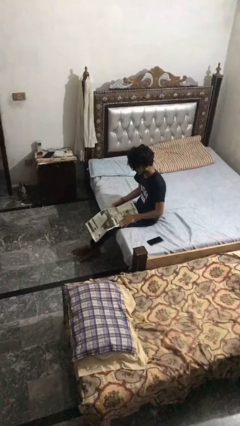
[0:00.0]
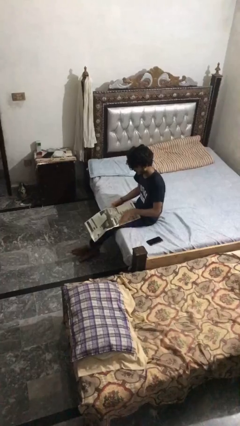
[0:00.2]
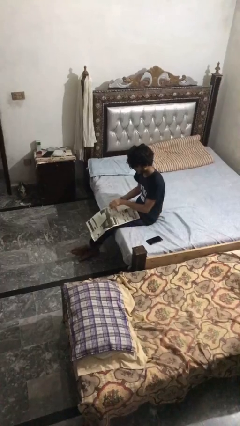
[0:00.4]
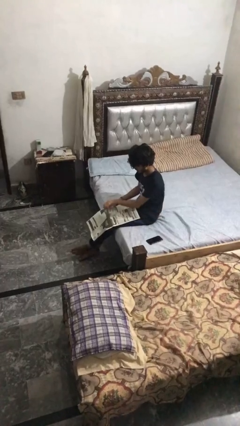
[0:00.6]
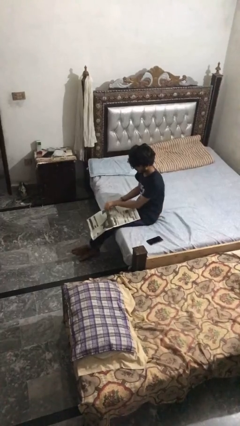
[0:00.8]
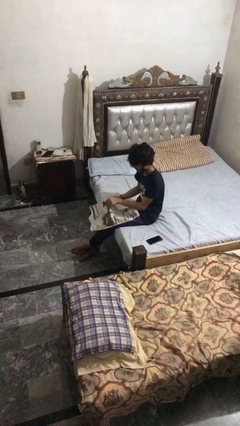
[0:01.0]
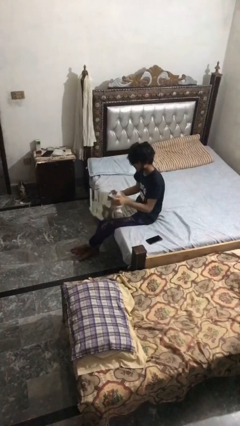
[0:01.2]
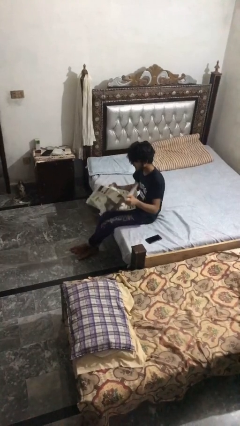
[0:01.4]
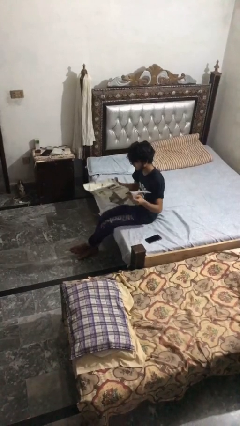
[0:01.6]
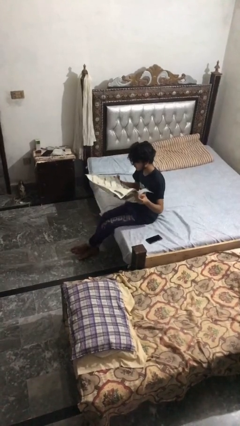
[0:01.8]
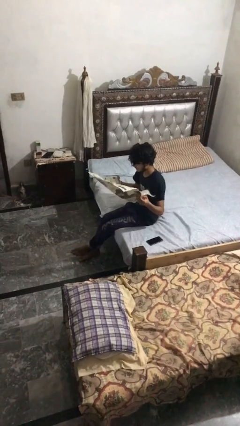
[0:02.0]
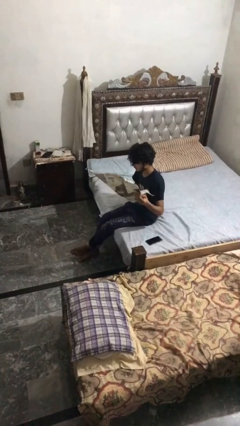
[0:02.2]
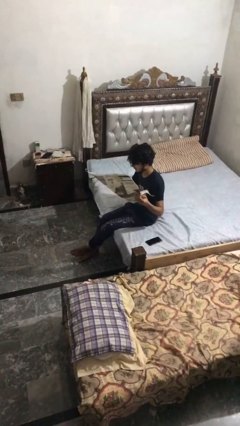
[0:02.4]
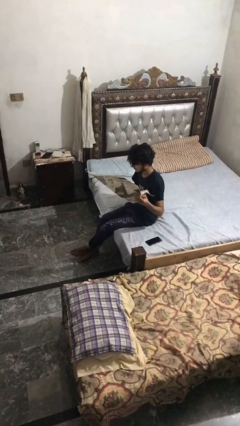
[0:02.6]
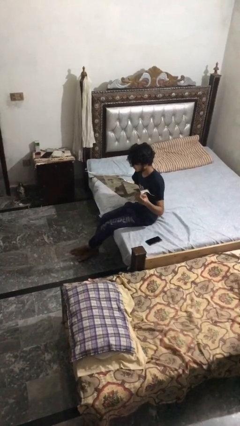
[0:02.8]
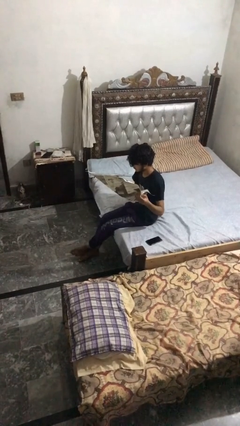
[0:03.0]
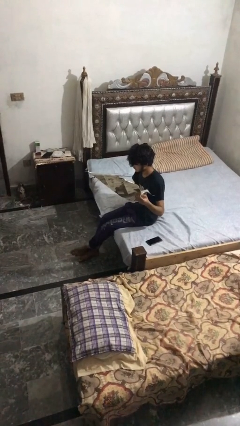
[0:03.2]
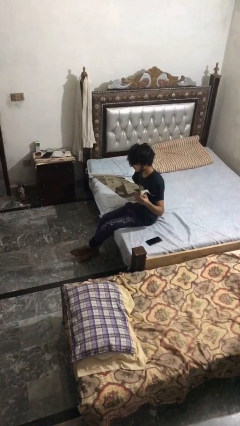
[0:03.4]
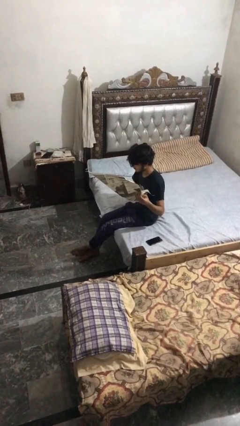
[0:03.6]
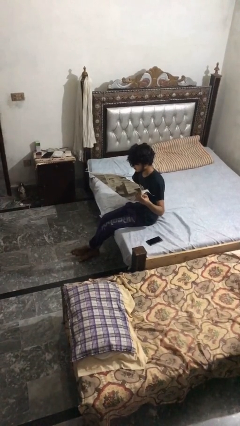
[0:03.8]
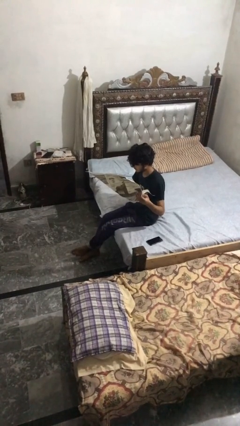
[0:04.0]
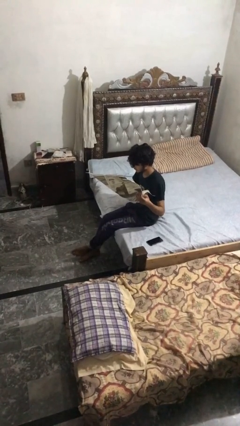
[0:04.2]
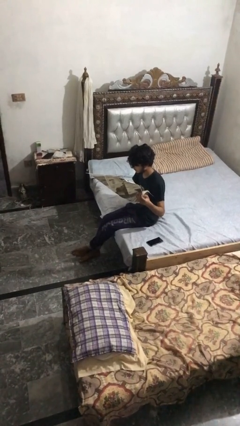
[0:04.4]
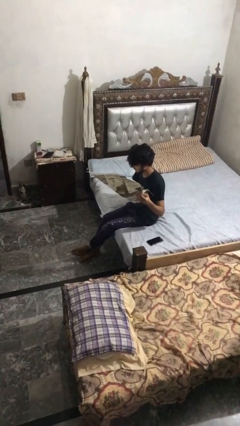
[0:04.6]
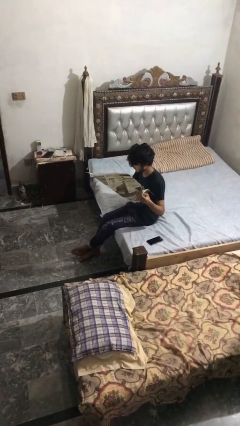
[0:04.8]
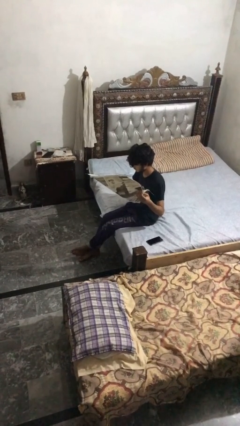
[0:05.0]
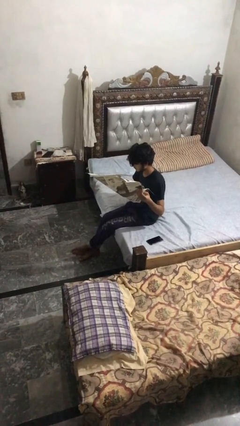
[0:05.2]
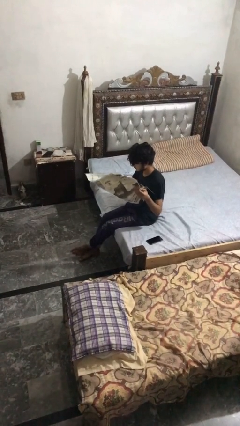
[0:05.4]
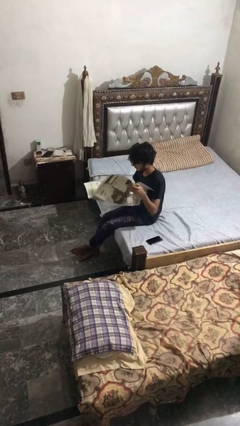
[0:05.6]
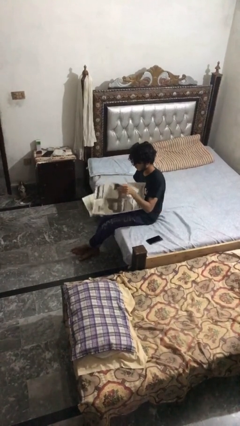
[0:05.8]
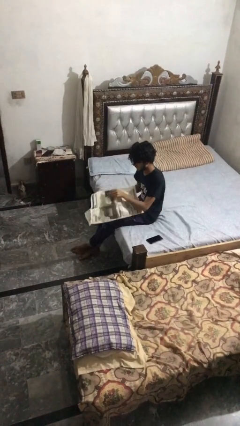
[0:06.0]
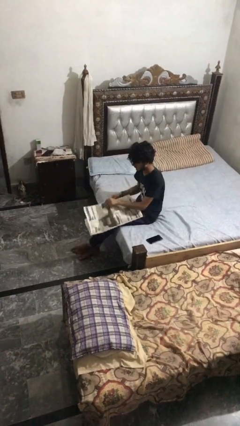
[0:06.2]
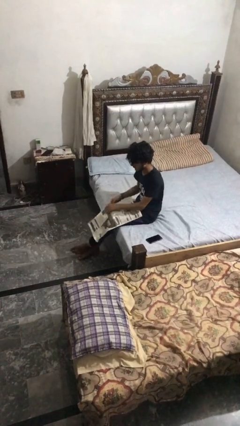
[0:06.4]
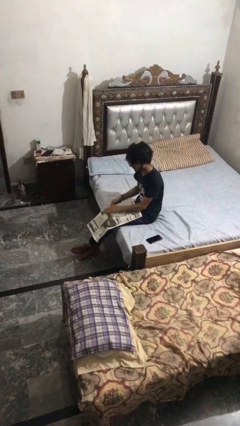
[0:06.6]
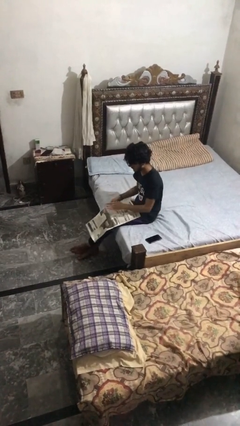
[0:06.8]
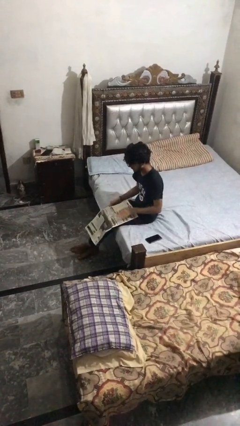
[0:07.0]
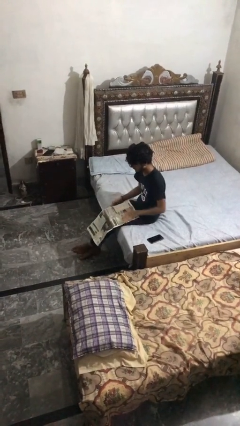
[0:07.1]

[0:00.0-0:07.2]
person reads newspaper

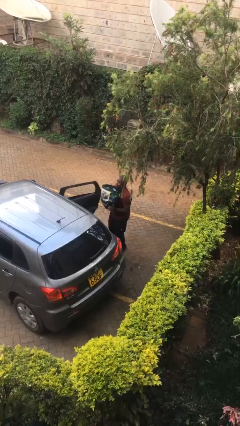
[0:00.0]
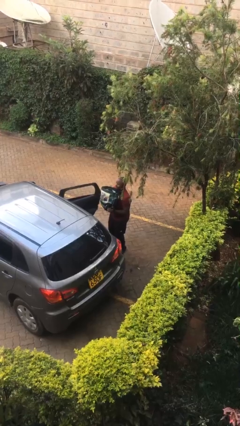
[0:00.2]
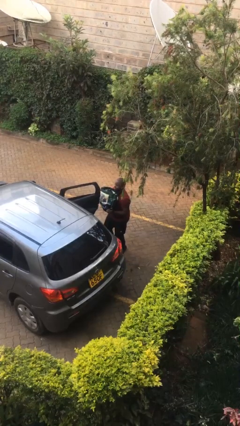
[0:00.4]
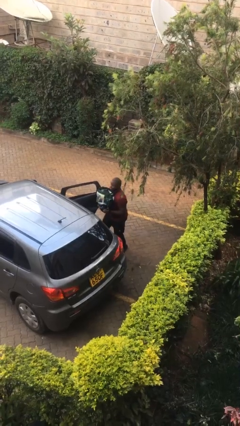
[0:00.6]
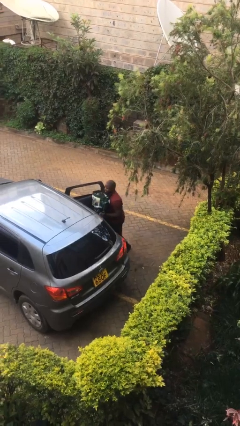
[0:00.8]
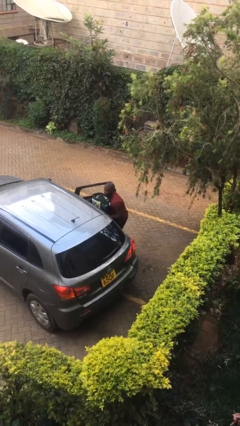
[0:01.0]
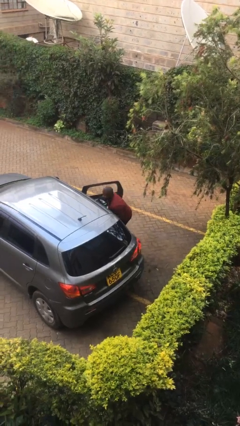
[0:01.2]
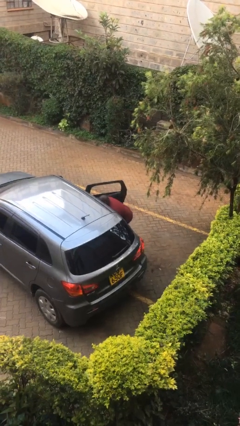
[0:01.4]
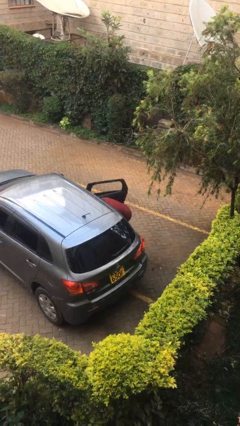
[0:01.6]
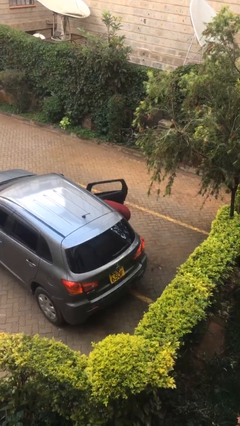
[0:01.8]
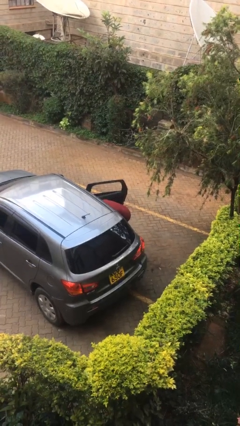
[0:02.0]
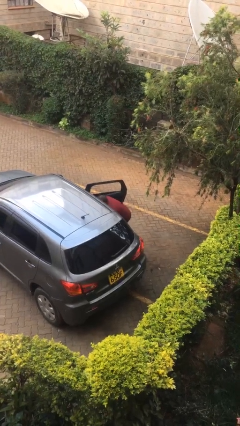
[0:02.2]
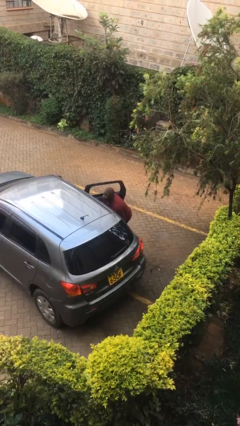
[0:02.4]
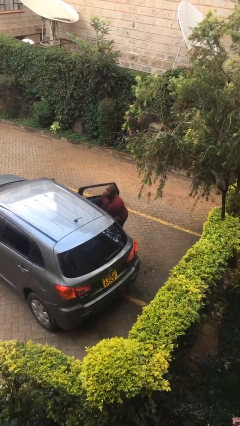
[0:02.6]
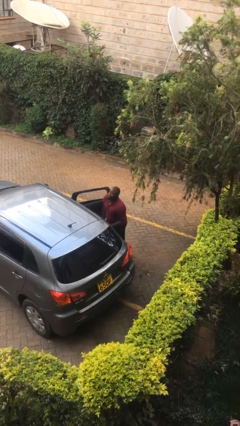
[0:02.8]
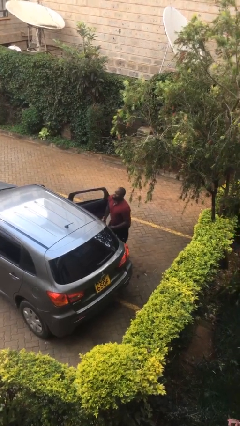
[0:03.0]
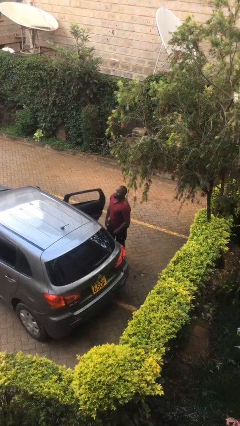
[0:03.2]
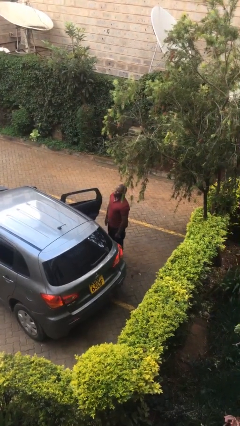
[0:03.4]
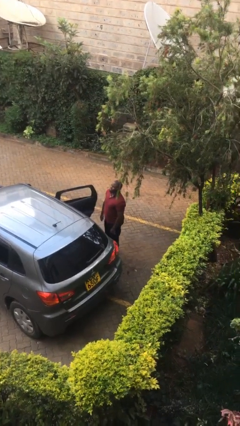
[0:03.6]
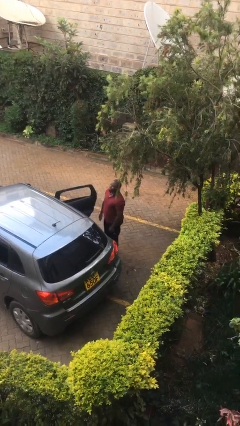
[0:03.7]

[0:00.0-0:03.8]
person loads car

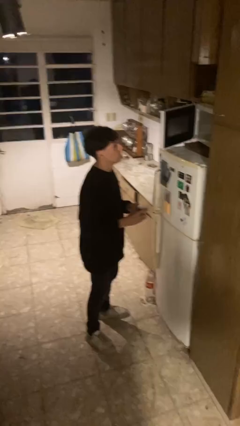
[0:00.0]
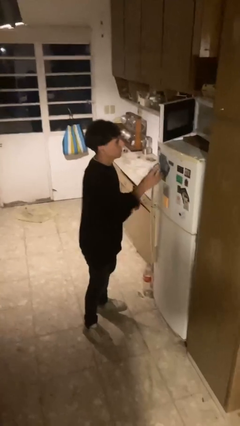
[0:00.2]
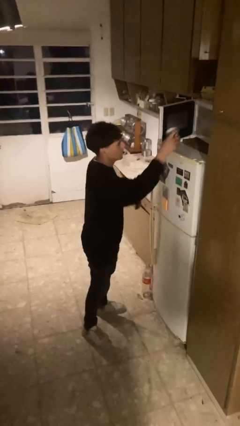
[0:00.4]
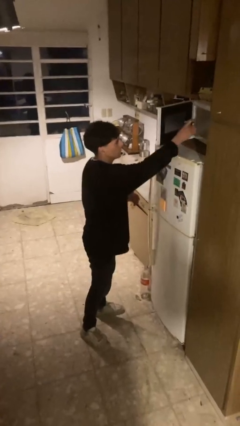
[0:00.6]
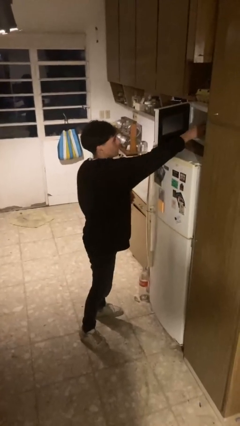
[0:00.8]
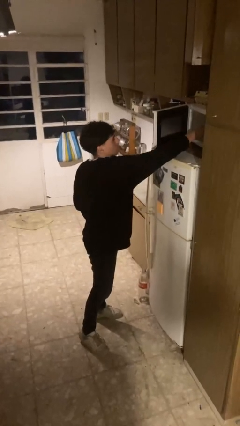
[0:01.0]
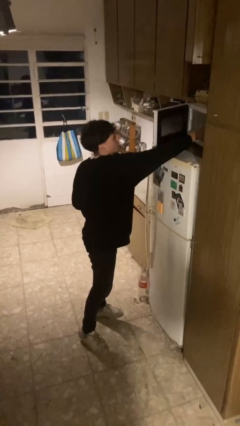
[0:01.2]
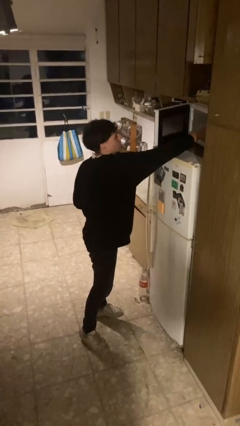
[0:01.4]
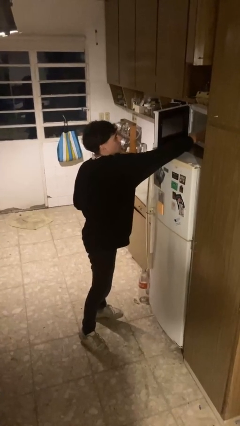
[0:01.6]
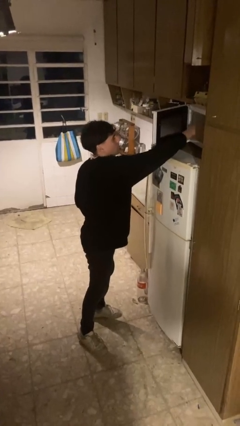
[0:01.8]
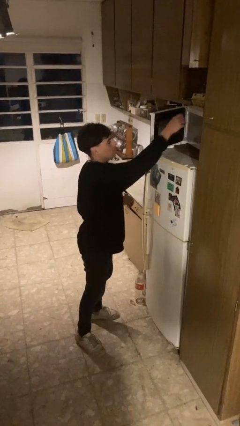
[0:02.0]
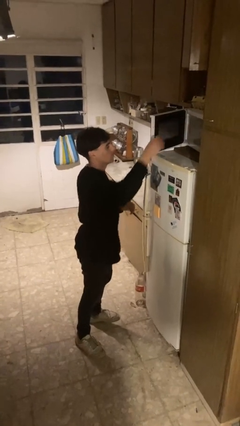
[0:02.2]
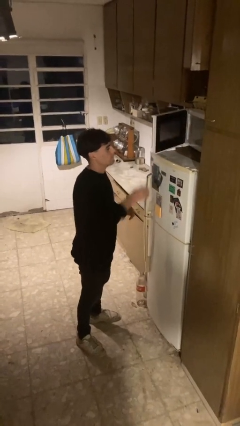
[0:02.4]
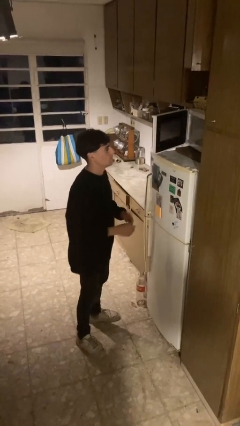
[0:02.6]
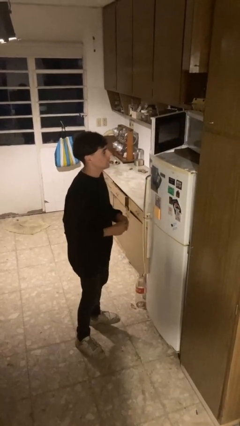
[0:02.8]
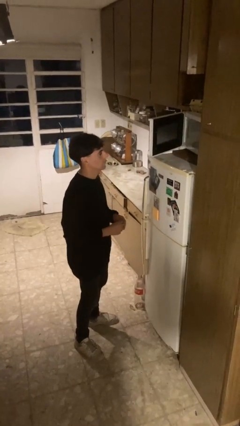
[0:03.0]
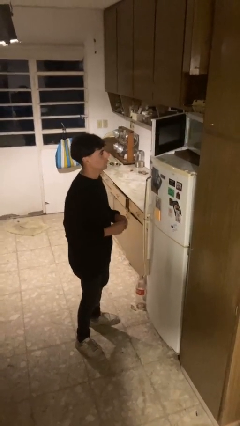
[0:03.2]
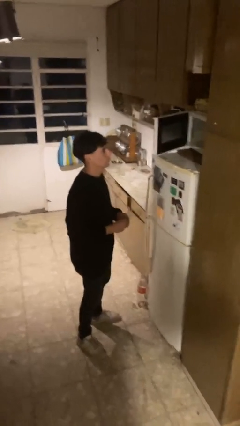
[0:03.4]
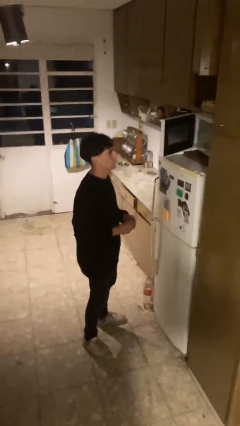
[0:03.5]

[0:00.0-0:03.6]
person puts object into microwave

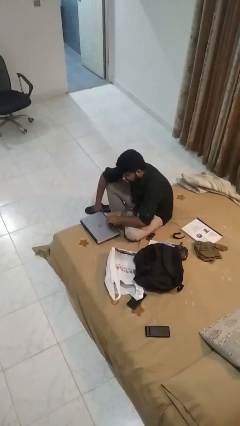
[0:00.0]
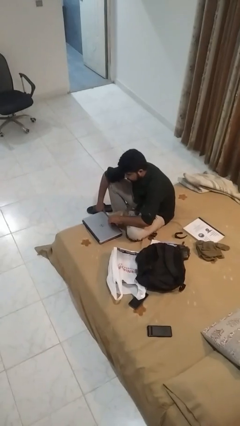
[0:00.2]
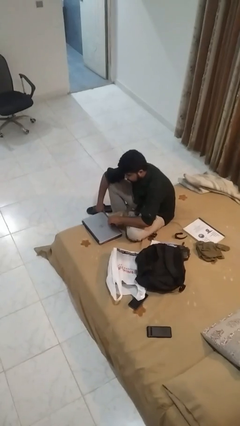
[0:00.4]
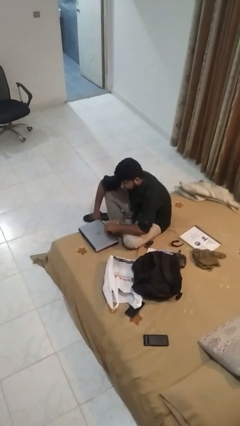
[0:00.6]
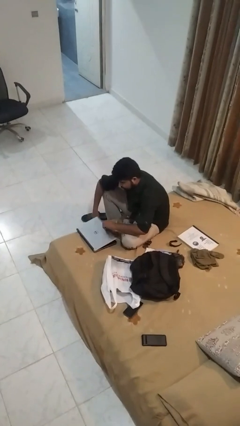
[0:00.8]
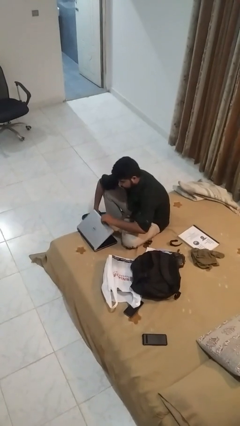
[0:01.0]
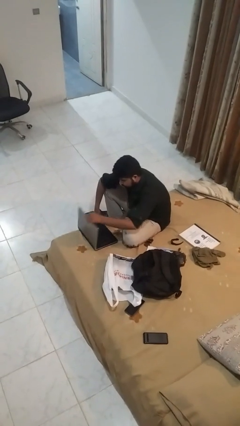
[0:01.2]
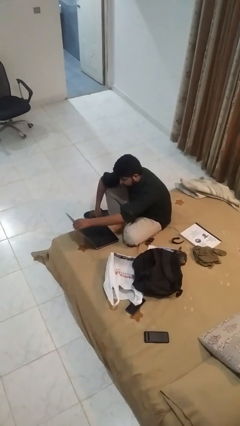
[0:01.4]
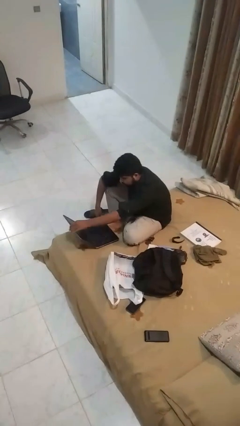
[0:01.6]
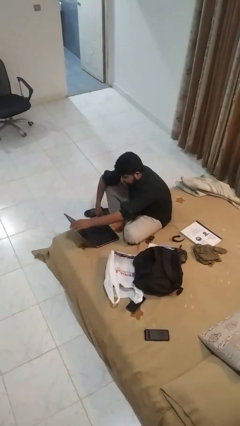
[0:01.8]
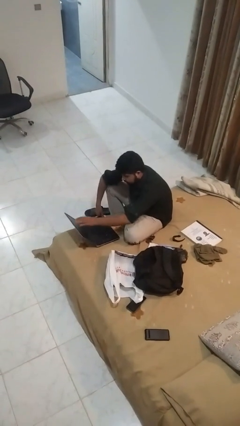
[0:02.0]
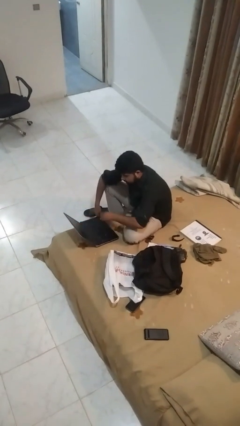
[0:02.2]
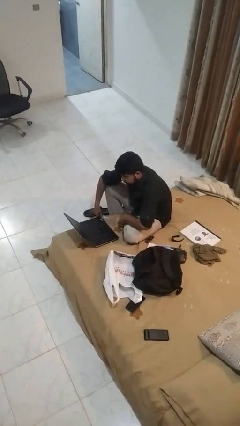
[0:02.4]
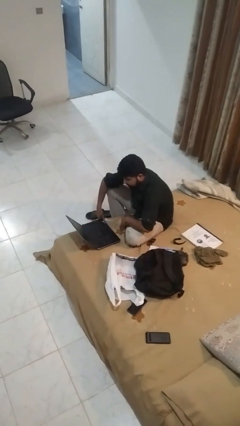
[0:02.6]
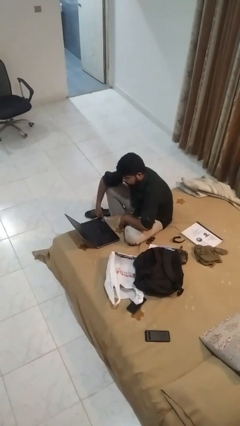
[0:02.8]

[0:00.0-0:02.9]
person opens laptop

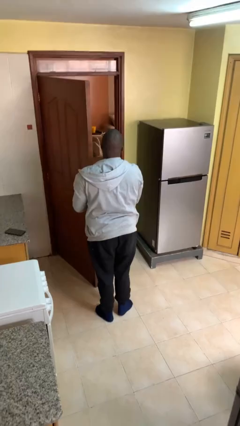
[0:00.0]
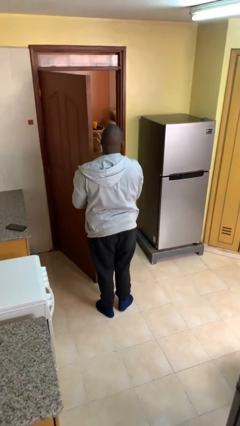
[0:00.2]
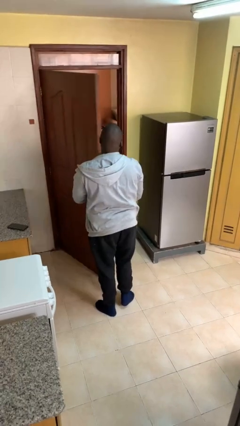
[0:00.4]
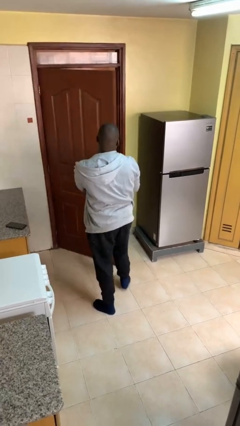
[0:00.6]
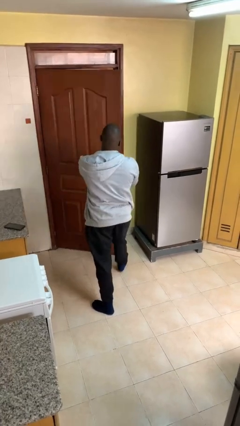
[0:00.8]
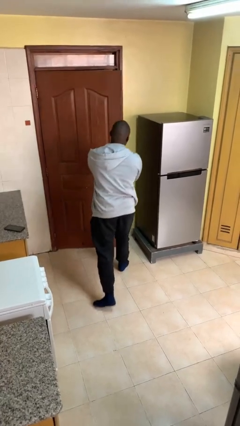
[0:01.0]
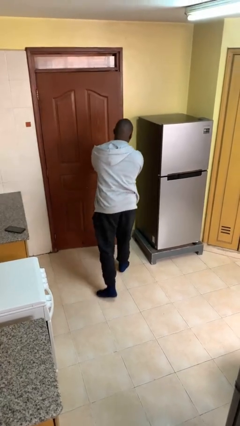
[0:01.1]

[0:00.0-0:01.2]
person closes facility door
